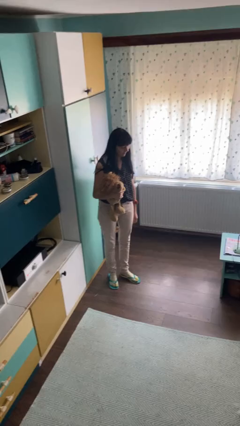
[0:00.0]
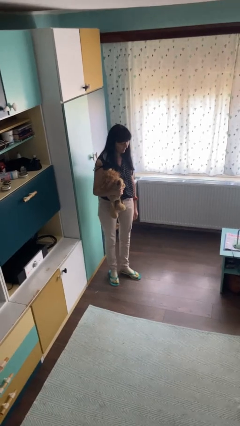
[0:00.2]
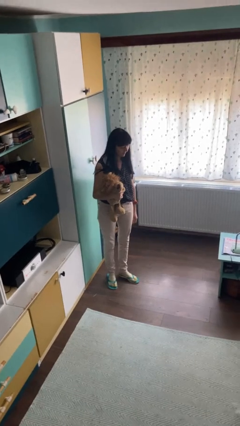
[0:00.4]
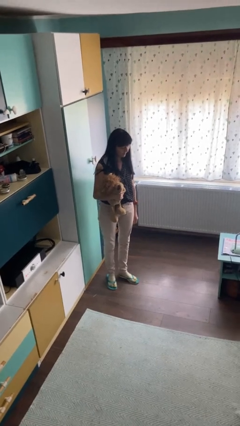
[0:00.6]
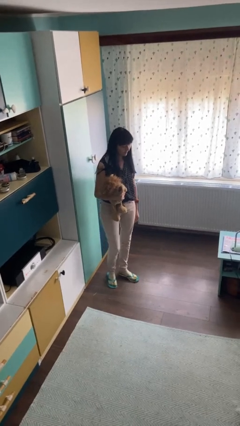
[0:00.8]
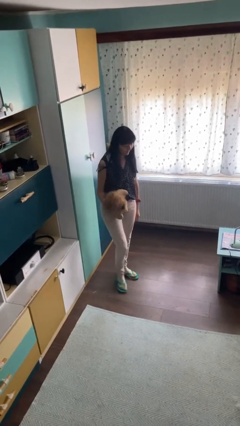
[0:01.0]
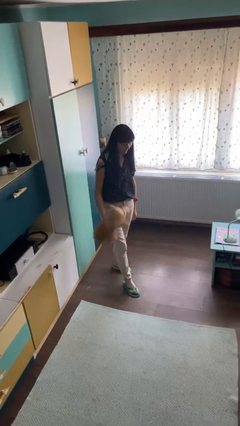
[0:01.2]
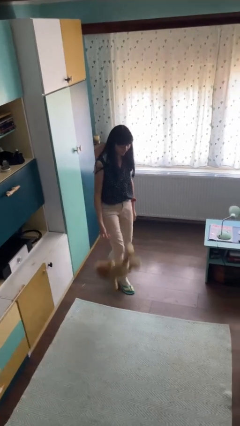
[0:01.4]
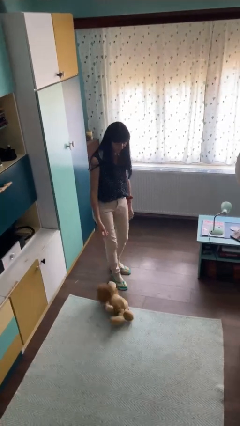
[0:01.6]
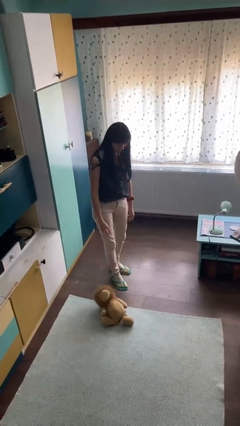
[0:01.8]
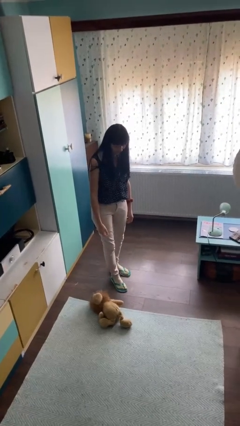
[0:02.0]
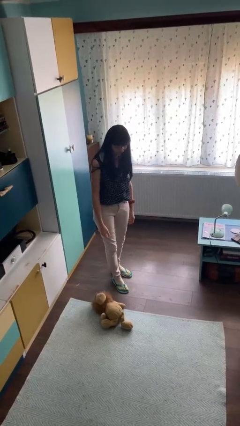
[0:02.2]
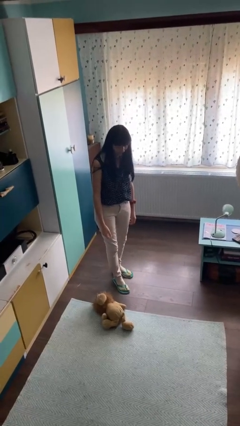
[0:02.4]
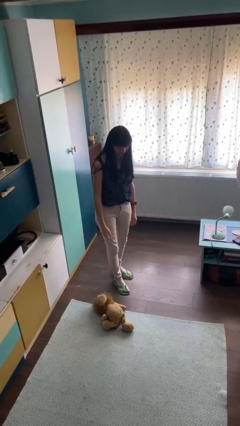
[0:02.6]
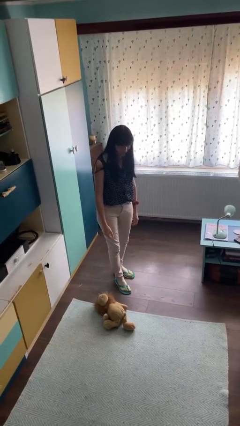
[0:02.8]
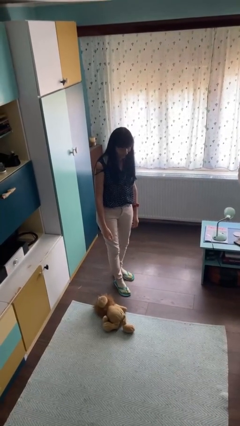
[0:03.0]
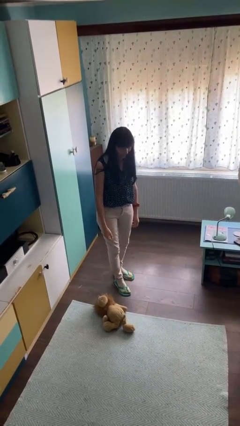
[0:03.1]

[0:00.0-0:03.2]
person drops object

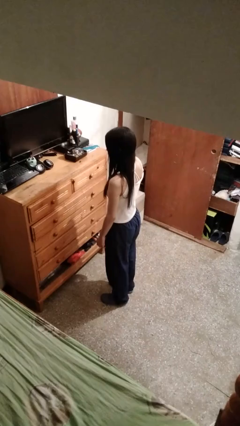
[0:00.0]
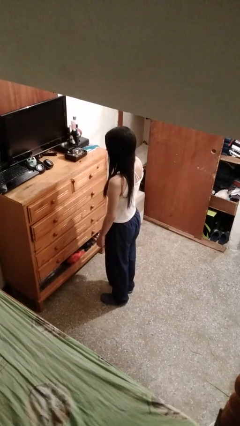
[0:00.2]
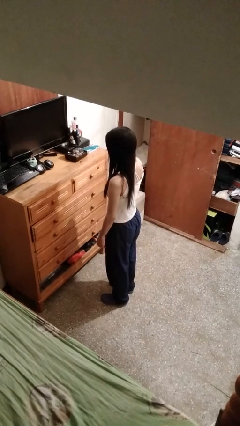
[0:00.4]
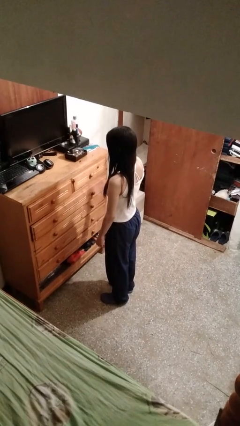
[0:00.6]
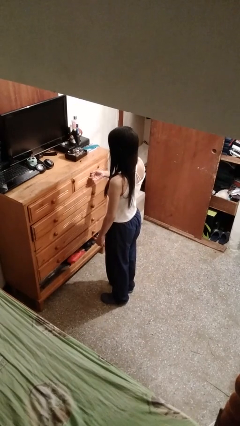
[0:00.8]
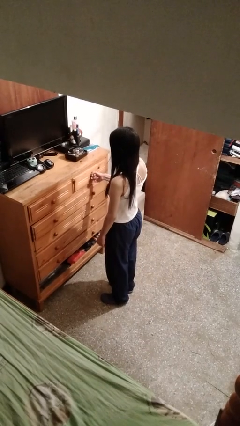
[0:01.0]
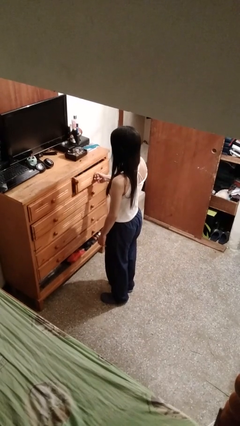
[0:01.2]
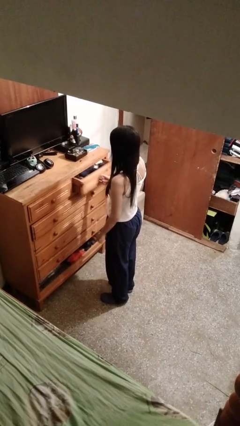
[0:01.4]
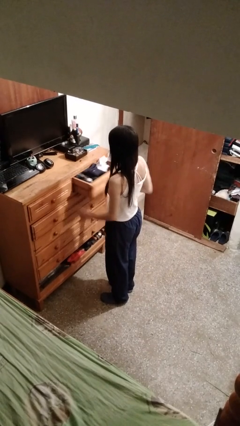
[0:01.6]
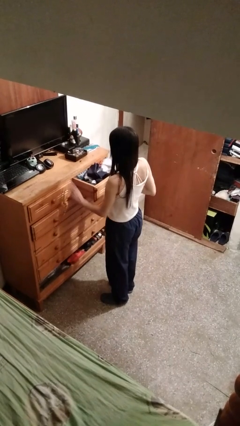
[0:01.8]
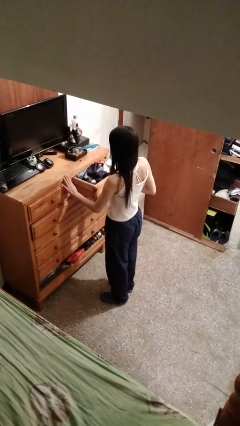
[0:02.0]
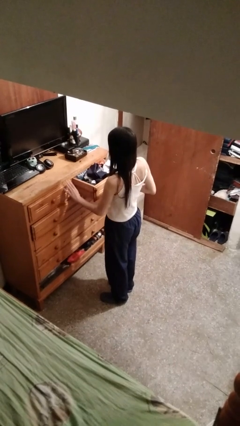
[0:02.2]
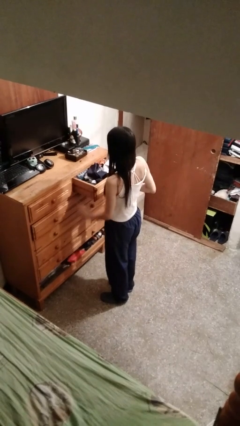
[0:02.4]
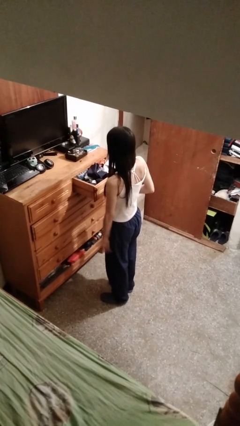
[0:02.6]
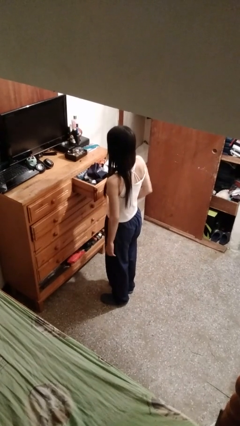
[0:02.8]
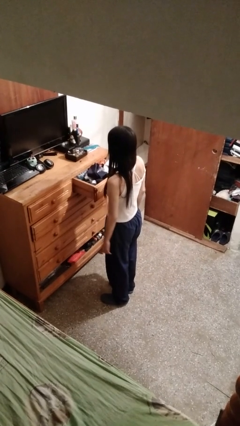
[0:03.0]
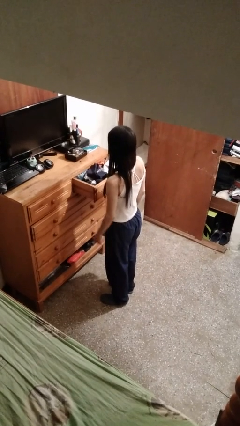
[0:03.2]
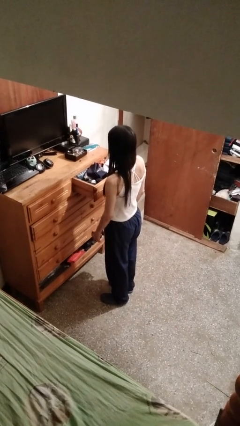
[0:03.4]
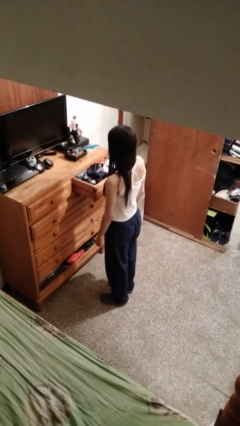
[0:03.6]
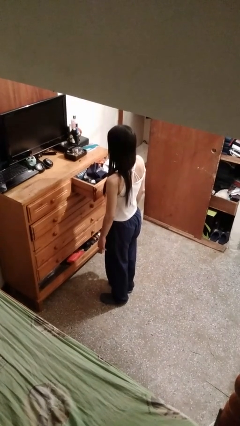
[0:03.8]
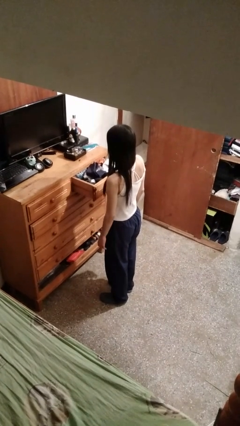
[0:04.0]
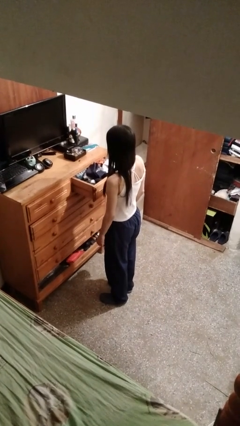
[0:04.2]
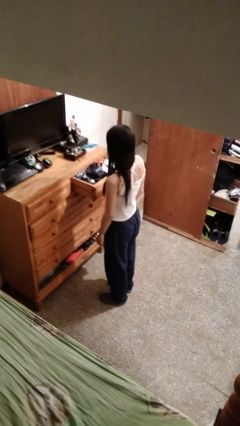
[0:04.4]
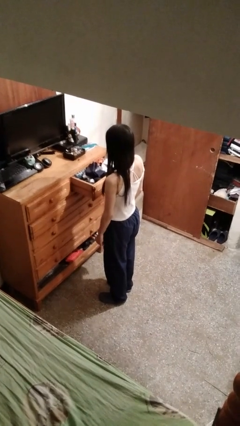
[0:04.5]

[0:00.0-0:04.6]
person opens dresser drawer

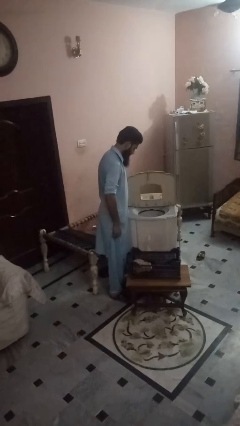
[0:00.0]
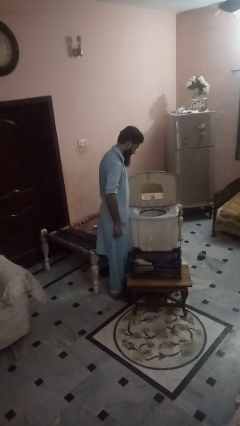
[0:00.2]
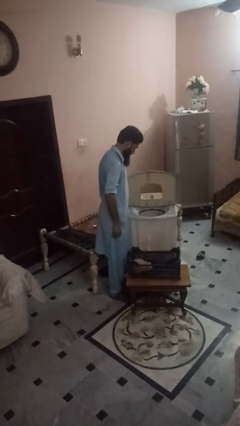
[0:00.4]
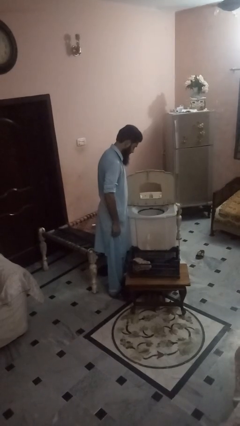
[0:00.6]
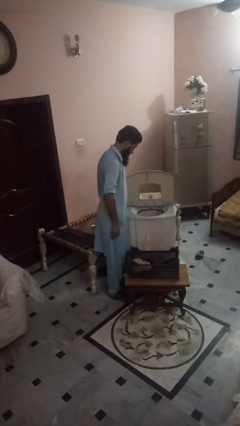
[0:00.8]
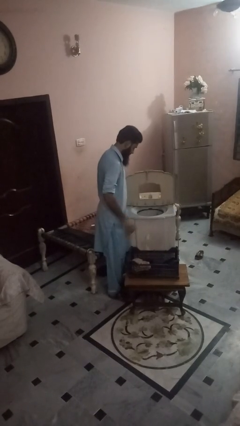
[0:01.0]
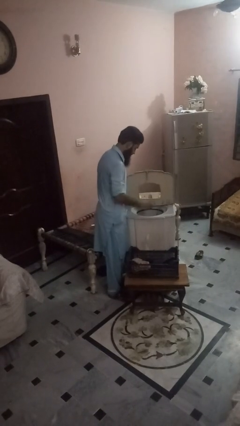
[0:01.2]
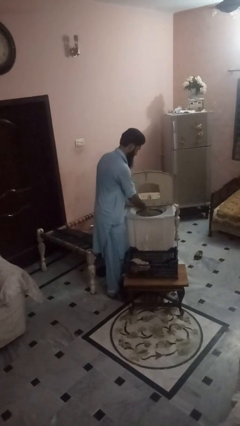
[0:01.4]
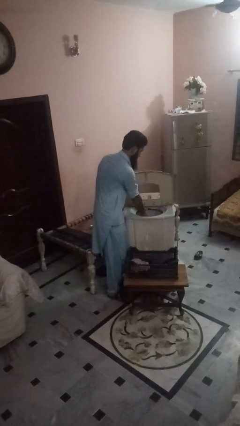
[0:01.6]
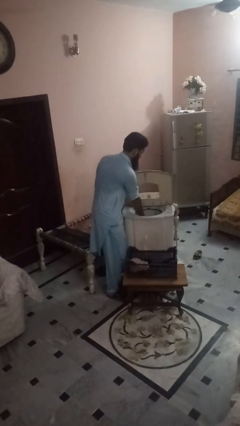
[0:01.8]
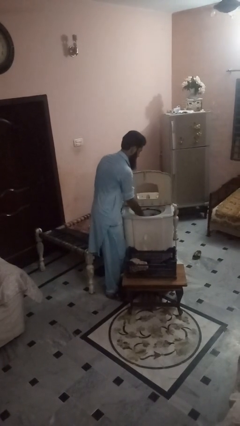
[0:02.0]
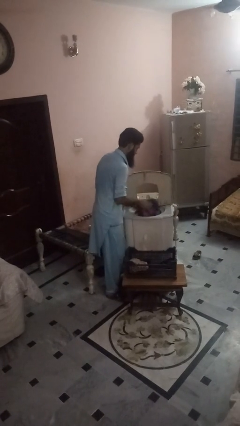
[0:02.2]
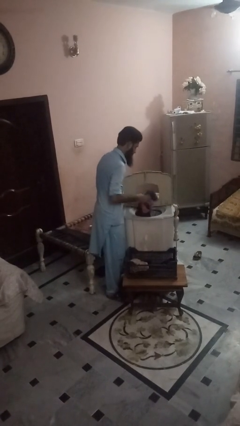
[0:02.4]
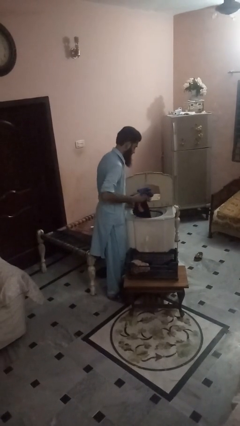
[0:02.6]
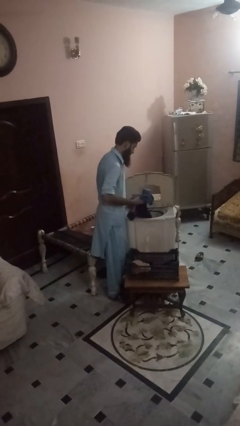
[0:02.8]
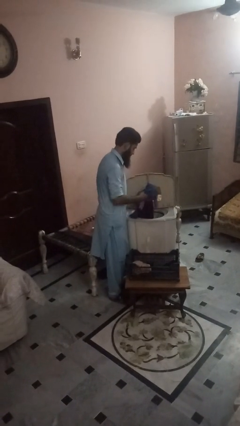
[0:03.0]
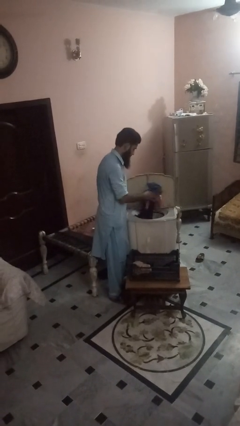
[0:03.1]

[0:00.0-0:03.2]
person unloads dishwasher

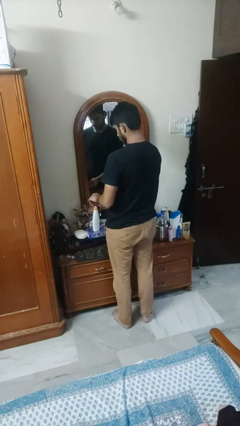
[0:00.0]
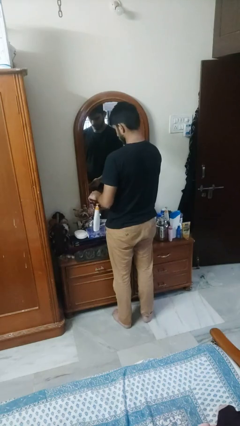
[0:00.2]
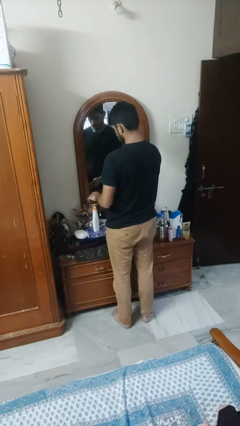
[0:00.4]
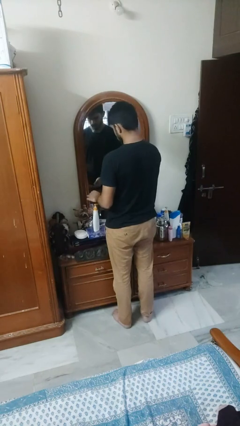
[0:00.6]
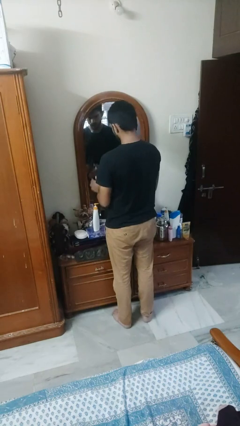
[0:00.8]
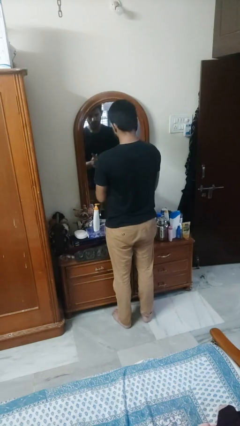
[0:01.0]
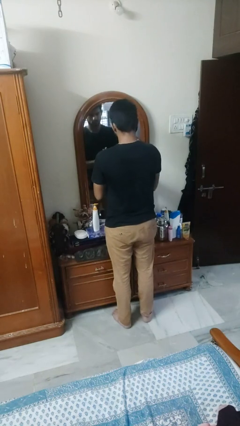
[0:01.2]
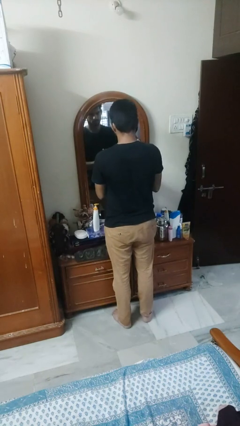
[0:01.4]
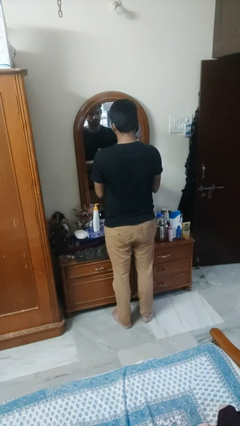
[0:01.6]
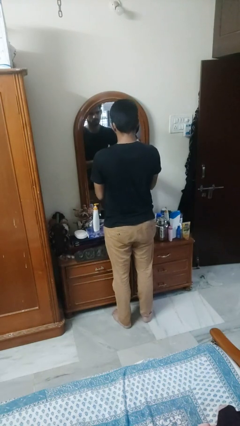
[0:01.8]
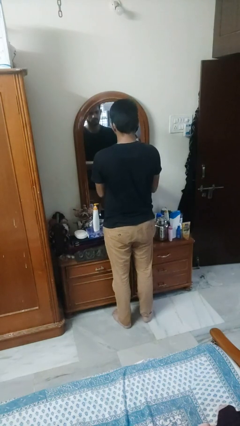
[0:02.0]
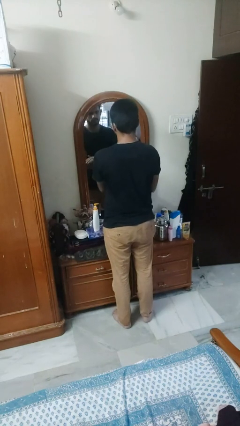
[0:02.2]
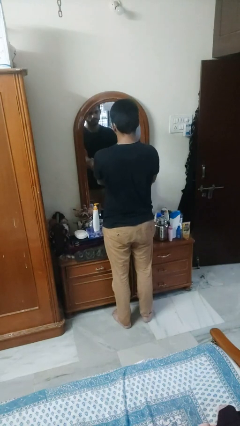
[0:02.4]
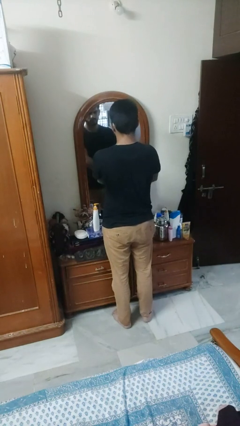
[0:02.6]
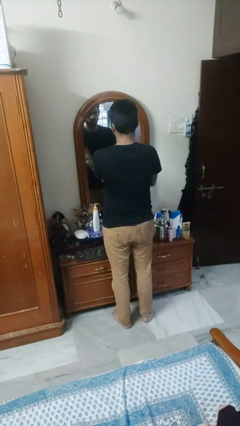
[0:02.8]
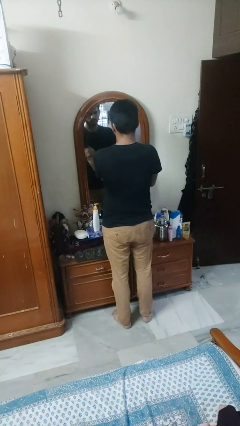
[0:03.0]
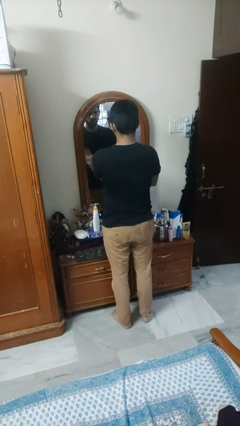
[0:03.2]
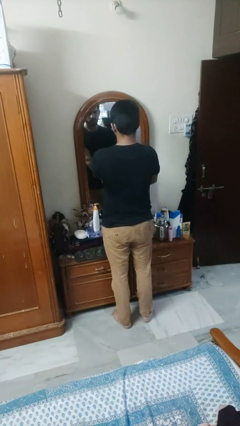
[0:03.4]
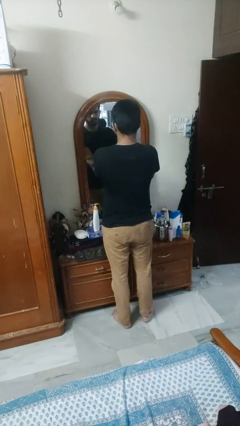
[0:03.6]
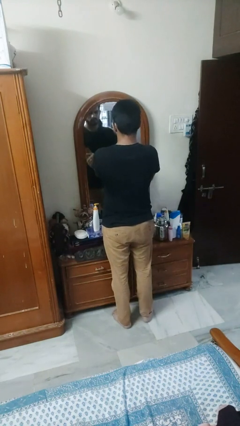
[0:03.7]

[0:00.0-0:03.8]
person applies facial moisturizer

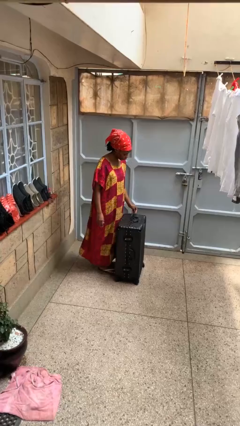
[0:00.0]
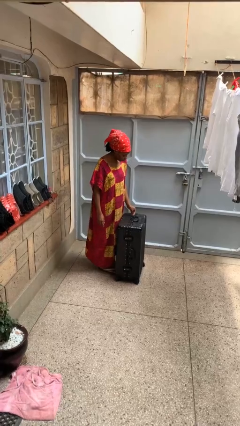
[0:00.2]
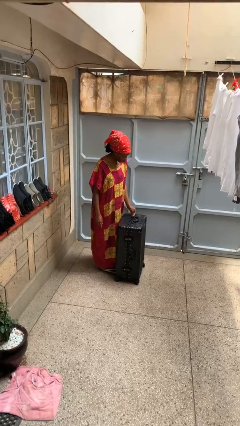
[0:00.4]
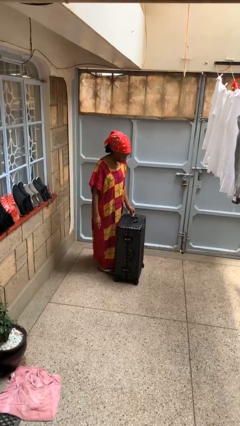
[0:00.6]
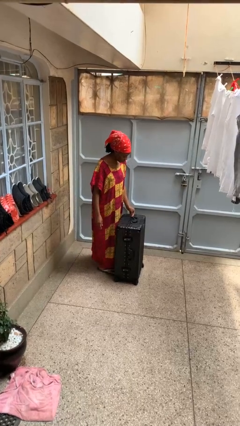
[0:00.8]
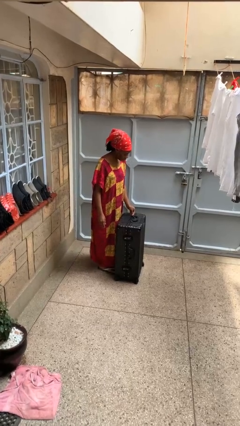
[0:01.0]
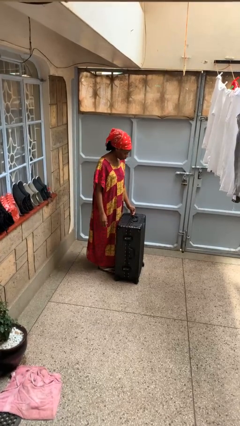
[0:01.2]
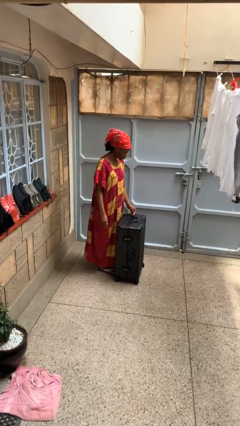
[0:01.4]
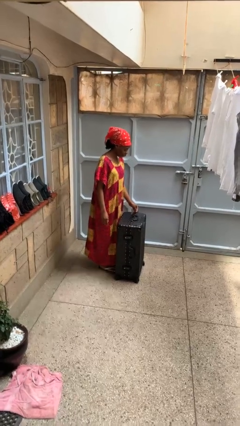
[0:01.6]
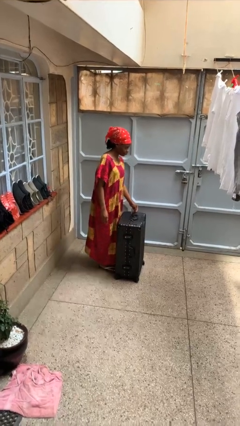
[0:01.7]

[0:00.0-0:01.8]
person opens suitcase

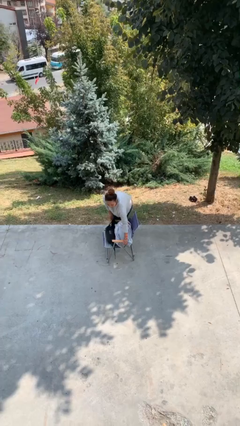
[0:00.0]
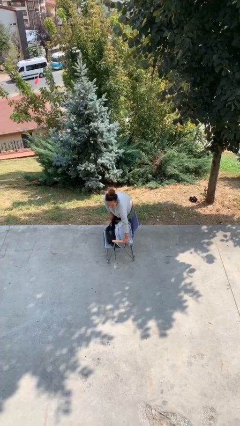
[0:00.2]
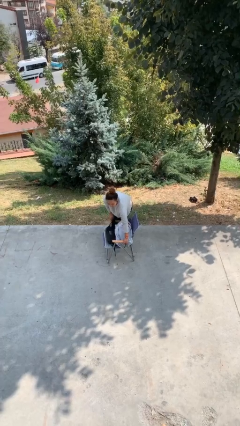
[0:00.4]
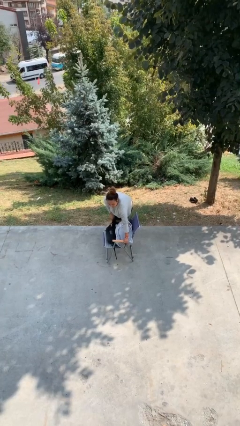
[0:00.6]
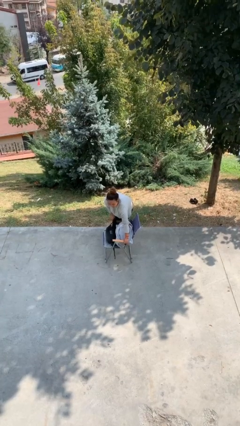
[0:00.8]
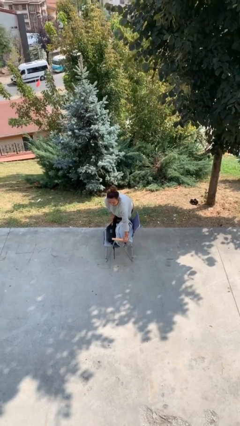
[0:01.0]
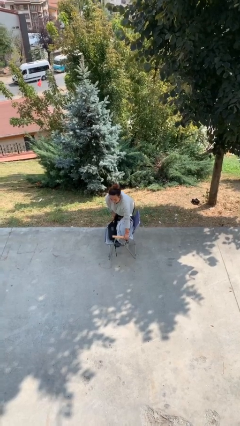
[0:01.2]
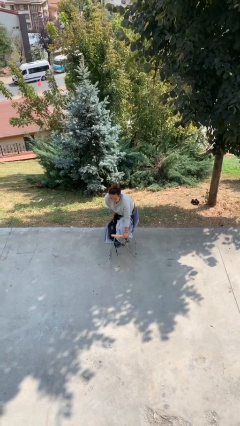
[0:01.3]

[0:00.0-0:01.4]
person picks up object from floor
